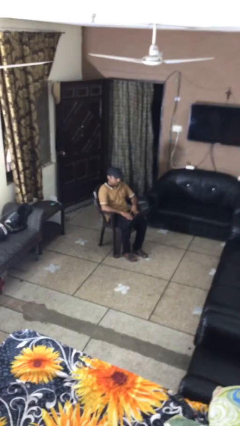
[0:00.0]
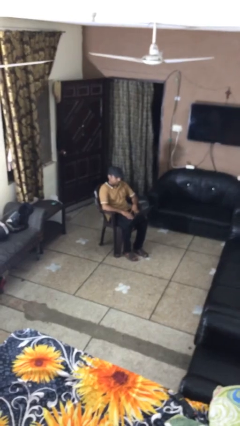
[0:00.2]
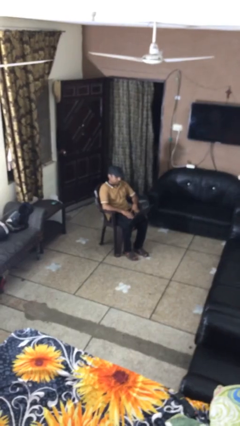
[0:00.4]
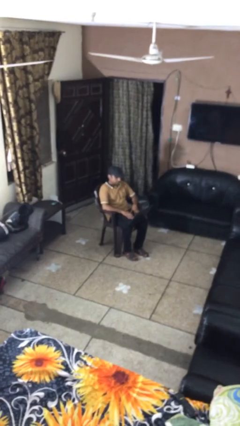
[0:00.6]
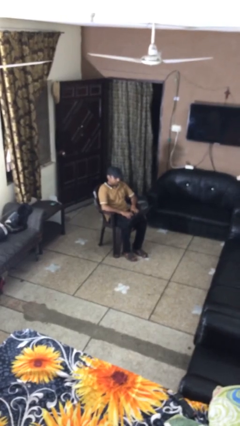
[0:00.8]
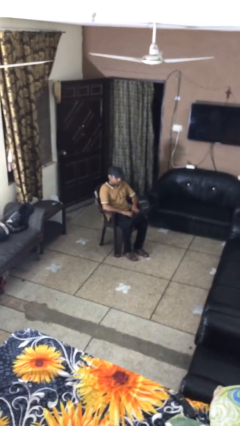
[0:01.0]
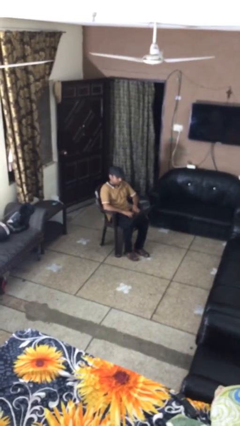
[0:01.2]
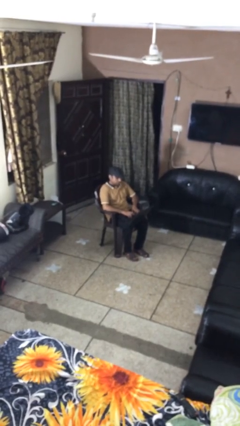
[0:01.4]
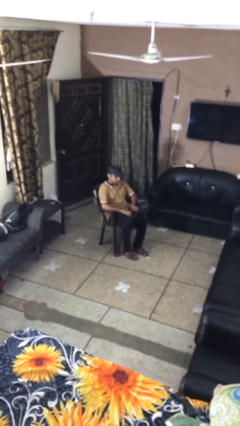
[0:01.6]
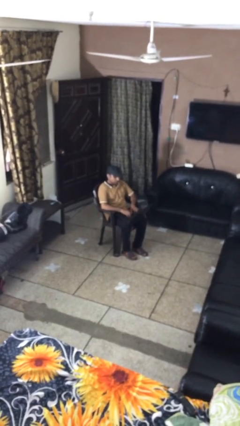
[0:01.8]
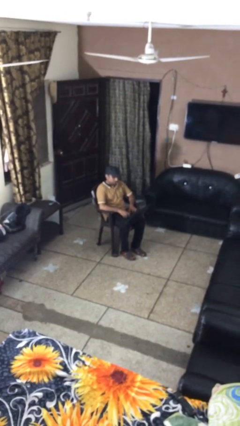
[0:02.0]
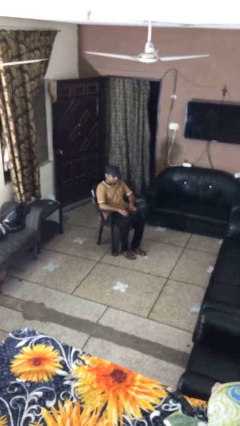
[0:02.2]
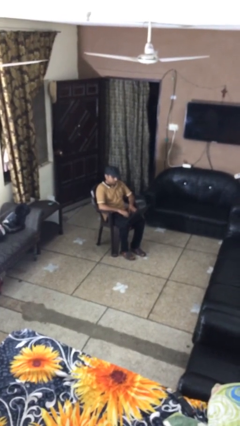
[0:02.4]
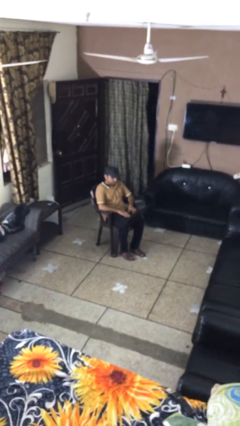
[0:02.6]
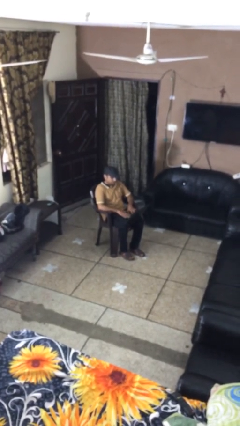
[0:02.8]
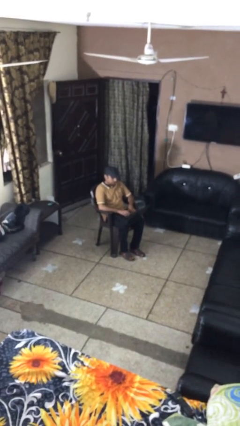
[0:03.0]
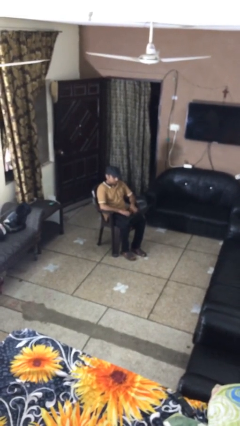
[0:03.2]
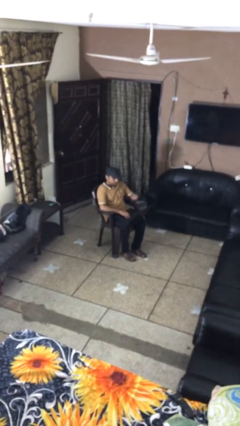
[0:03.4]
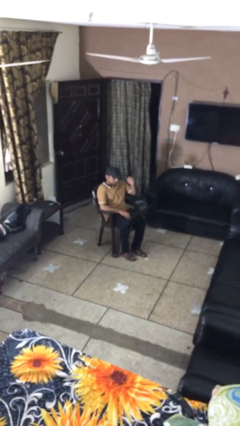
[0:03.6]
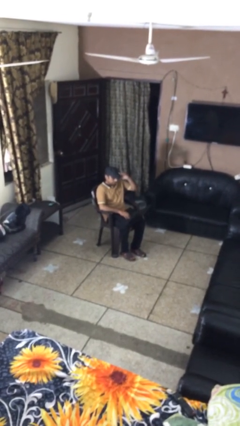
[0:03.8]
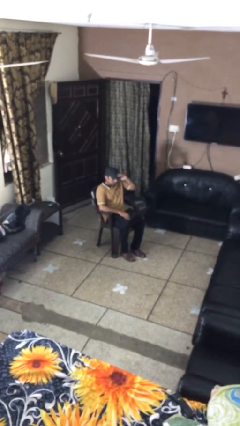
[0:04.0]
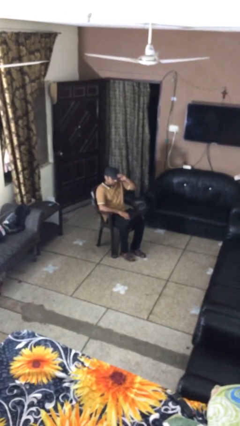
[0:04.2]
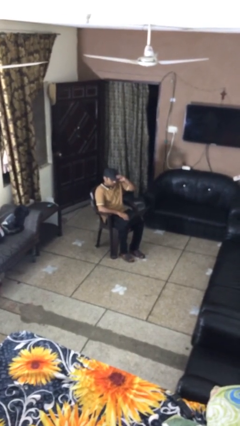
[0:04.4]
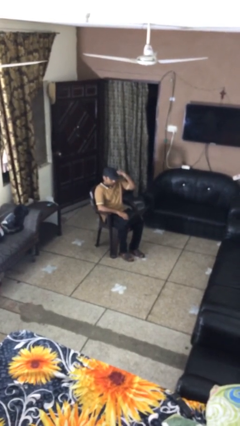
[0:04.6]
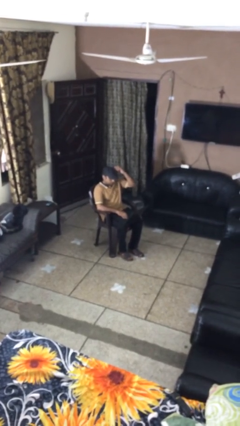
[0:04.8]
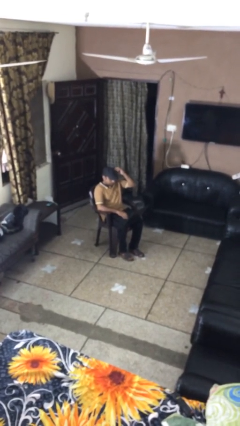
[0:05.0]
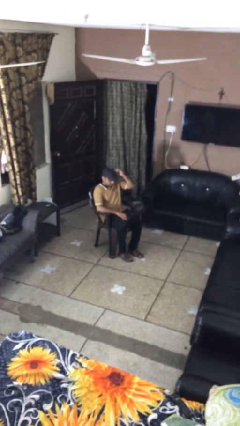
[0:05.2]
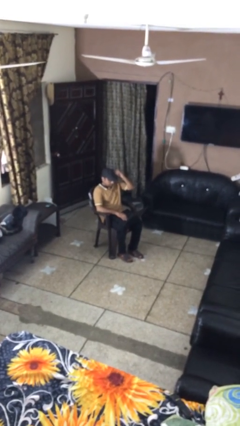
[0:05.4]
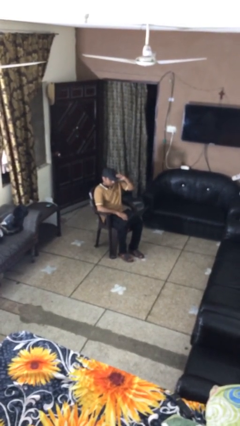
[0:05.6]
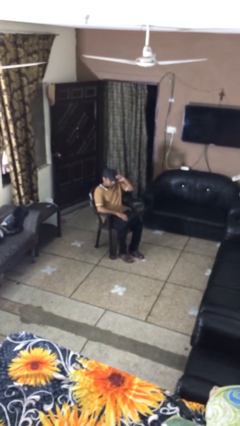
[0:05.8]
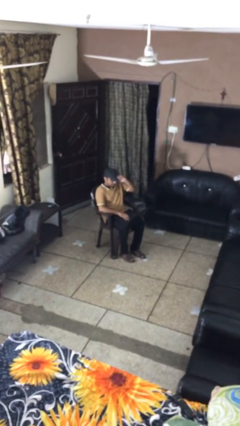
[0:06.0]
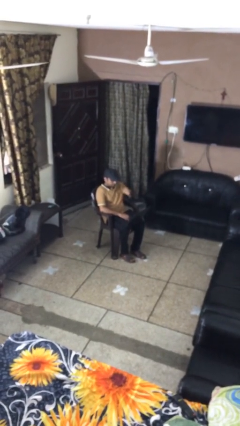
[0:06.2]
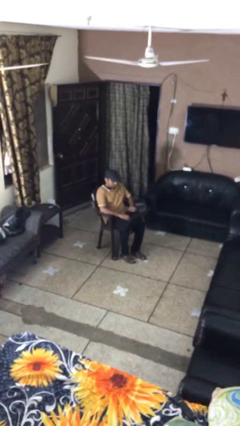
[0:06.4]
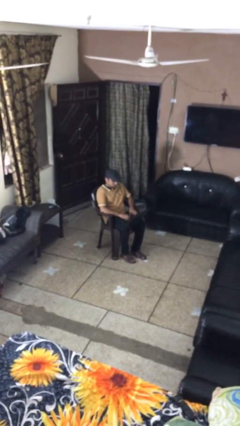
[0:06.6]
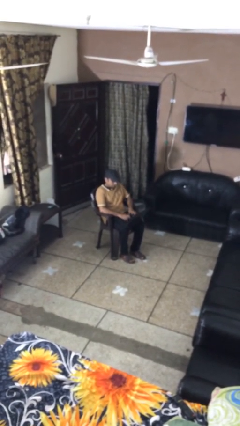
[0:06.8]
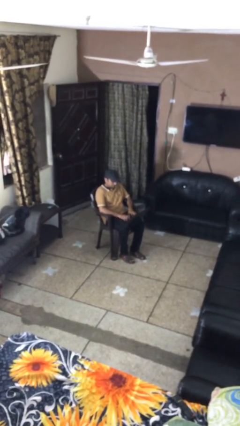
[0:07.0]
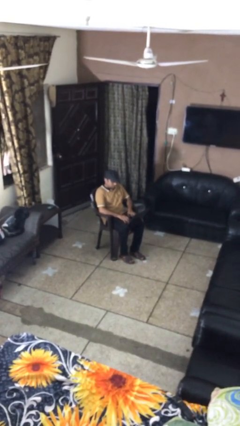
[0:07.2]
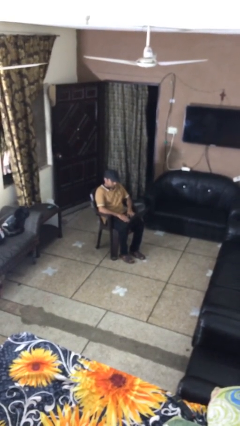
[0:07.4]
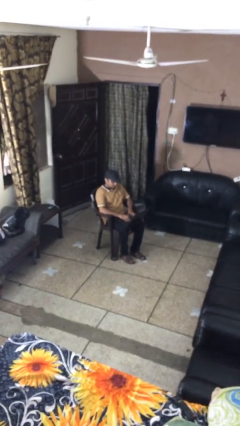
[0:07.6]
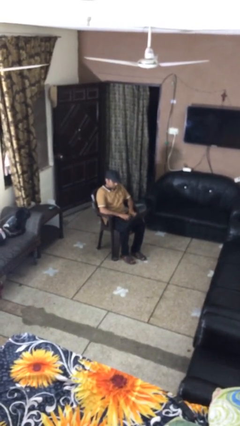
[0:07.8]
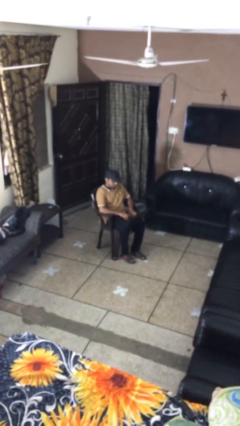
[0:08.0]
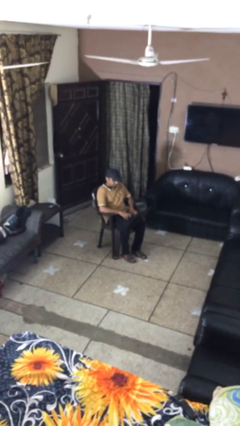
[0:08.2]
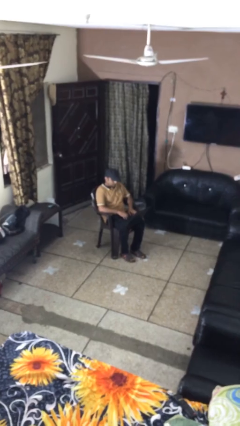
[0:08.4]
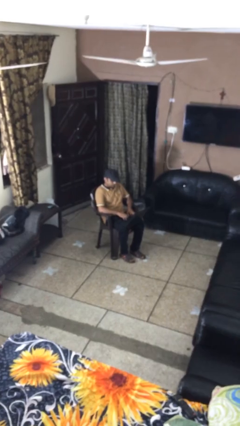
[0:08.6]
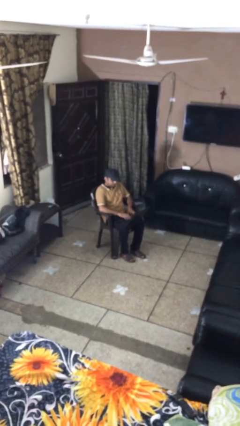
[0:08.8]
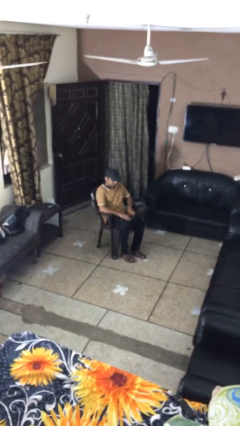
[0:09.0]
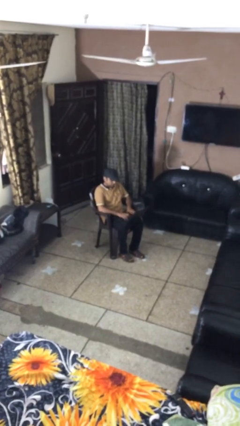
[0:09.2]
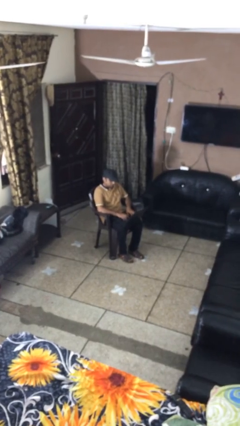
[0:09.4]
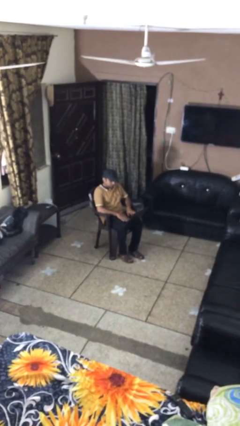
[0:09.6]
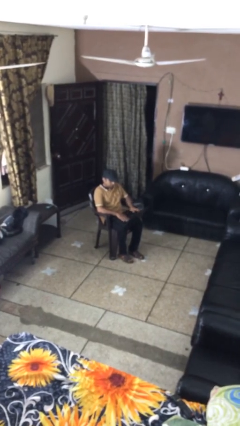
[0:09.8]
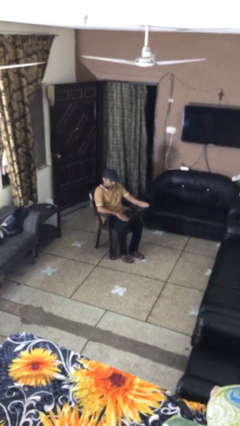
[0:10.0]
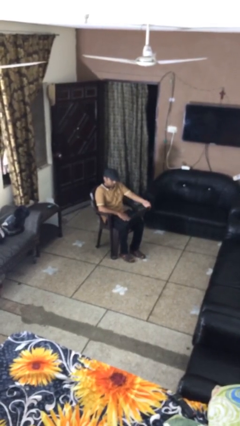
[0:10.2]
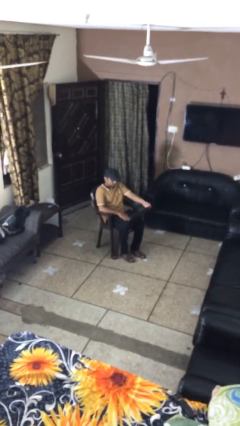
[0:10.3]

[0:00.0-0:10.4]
person interacts with laptop

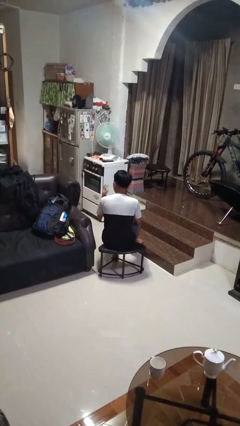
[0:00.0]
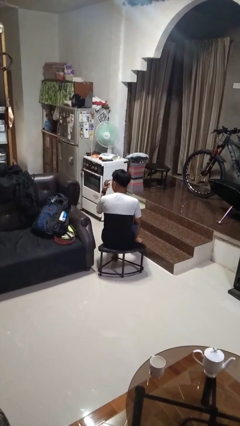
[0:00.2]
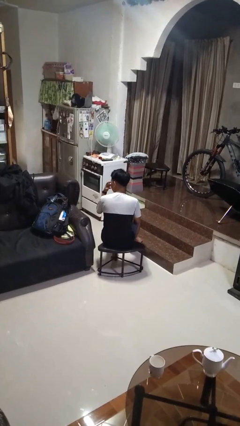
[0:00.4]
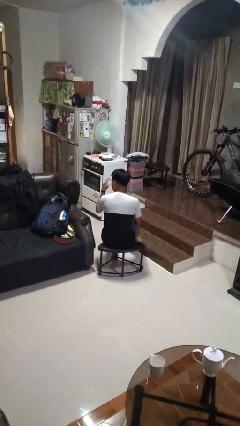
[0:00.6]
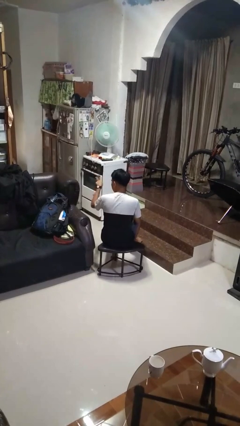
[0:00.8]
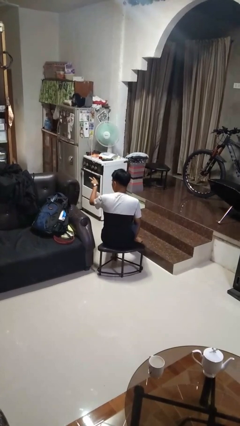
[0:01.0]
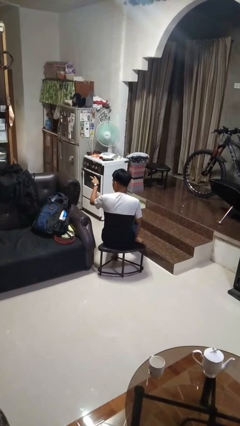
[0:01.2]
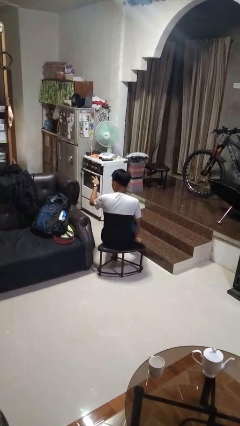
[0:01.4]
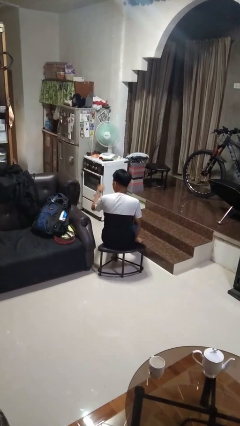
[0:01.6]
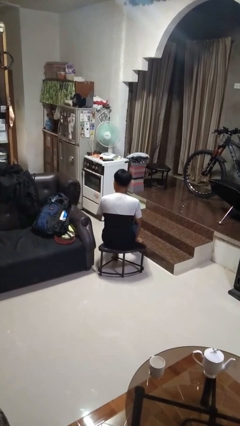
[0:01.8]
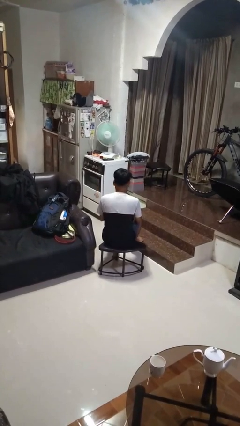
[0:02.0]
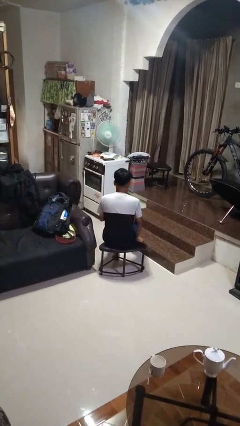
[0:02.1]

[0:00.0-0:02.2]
person gestures watch closely

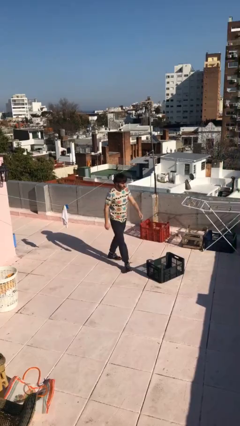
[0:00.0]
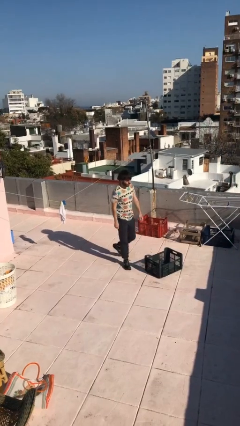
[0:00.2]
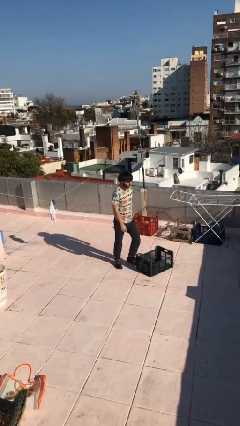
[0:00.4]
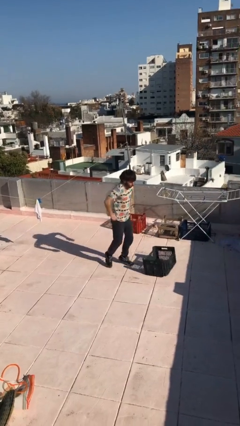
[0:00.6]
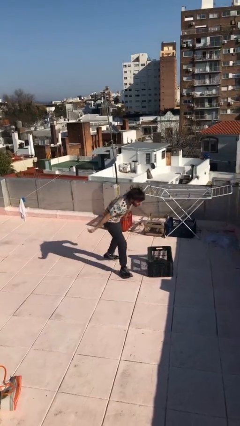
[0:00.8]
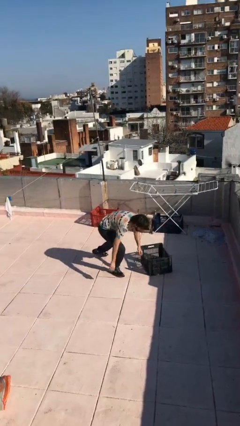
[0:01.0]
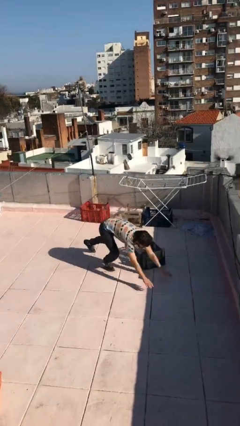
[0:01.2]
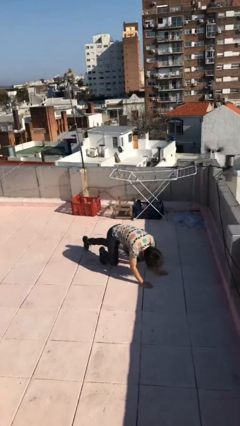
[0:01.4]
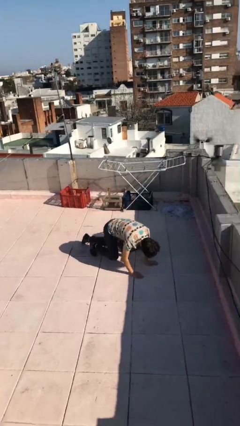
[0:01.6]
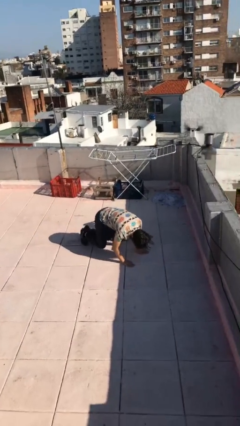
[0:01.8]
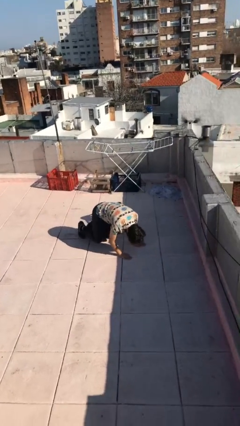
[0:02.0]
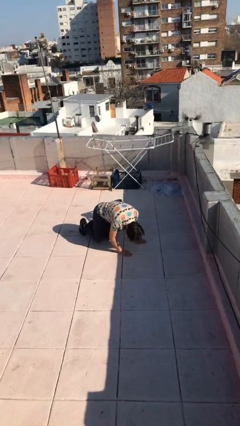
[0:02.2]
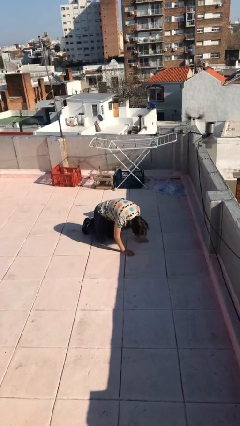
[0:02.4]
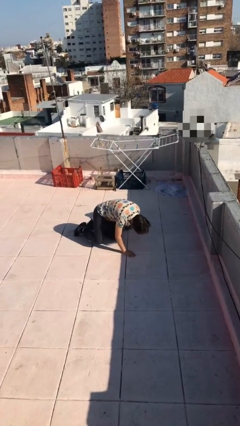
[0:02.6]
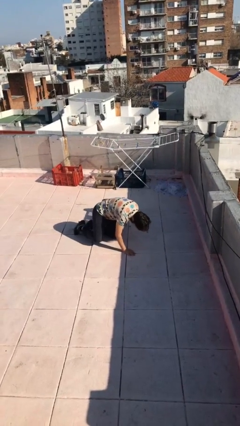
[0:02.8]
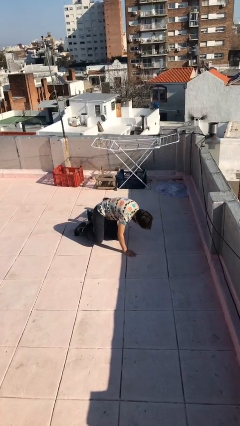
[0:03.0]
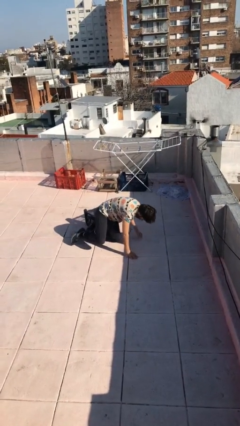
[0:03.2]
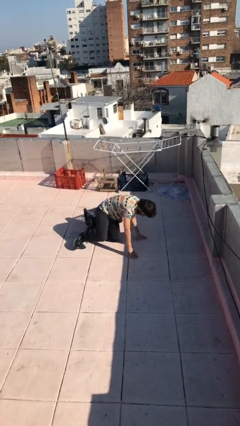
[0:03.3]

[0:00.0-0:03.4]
person trips on object on floor

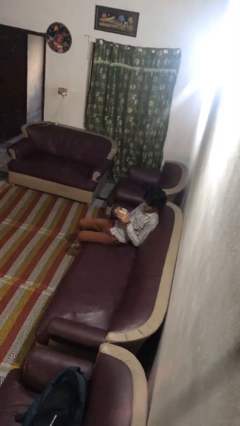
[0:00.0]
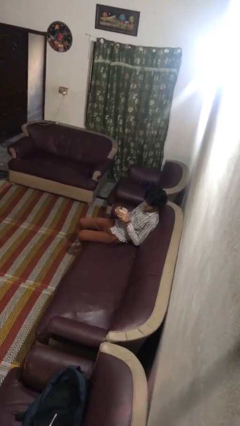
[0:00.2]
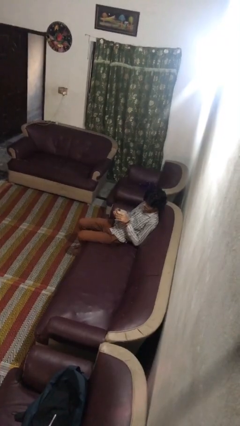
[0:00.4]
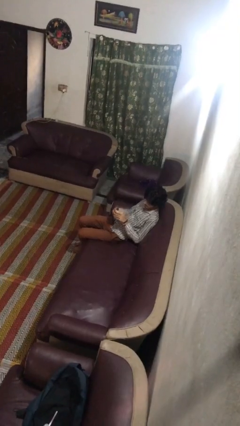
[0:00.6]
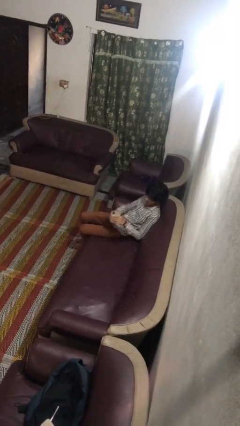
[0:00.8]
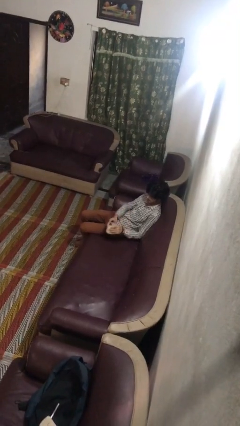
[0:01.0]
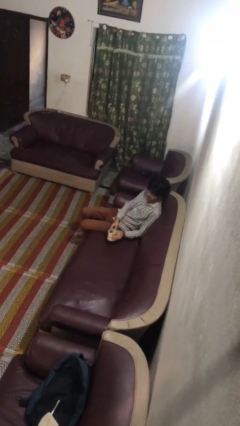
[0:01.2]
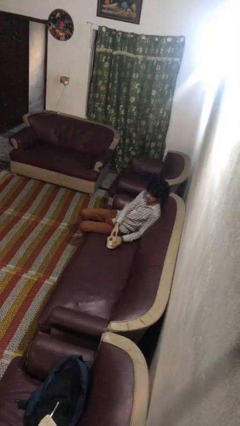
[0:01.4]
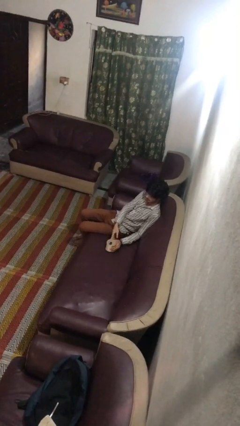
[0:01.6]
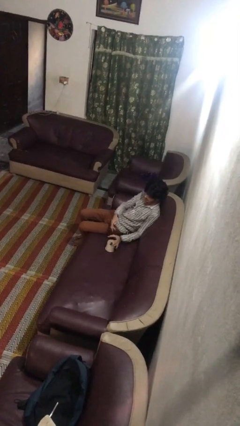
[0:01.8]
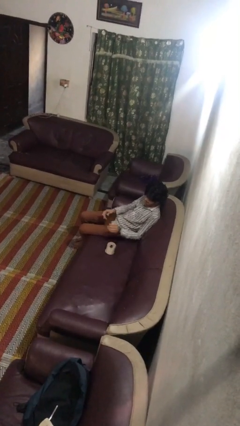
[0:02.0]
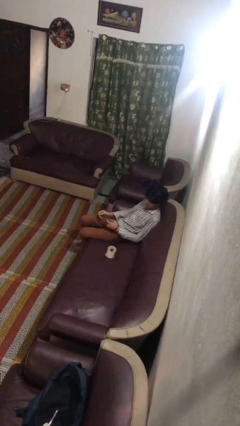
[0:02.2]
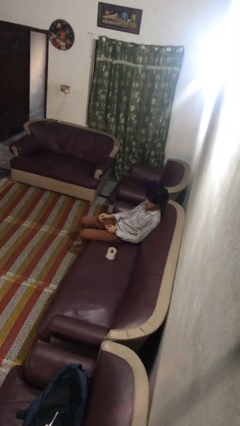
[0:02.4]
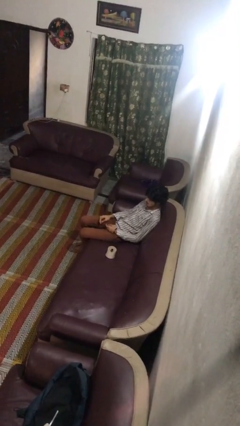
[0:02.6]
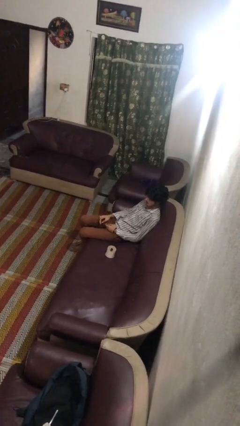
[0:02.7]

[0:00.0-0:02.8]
person puts down object on couch
